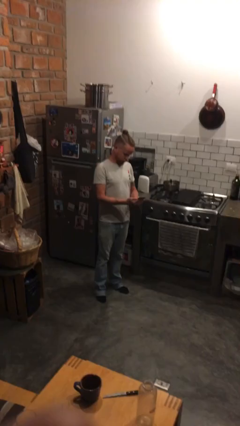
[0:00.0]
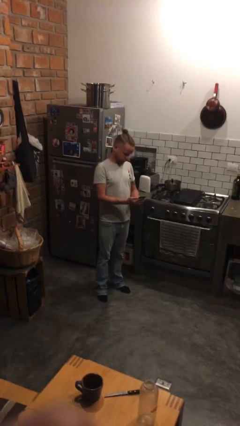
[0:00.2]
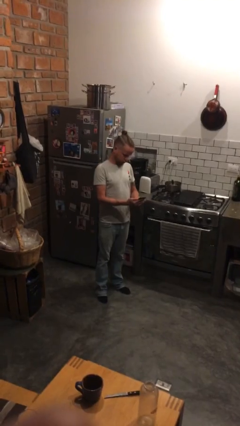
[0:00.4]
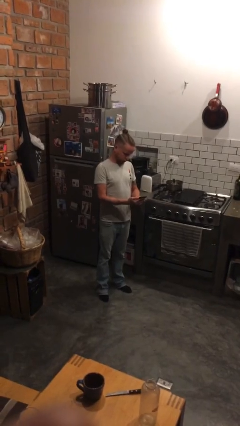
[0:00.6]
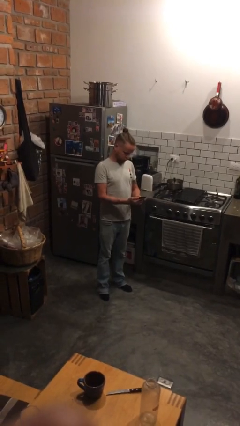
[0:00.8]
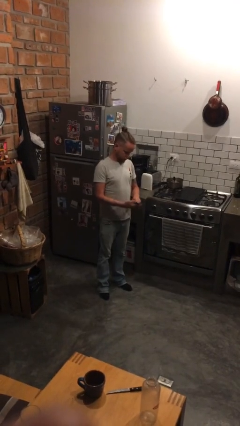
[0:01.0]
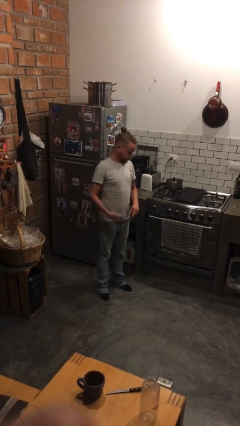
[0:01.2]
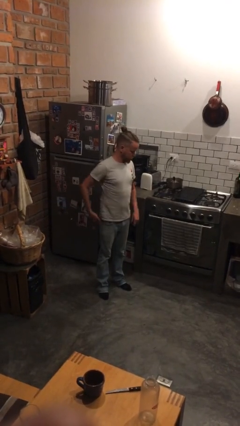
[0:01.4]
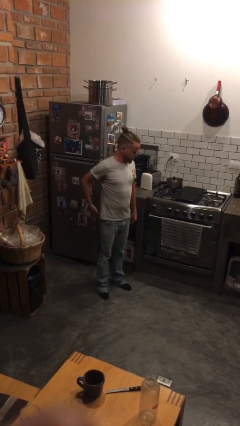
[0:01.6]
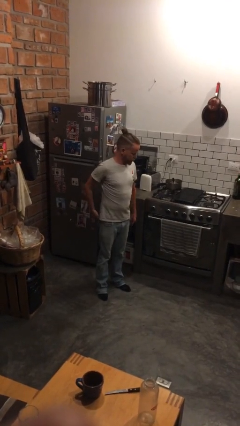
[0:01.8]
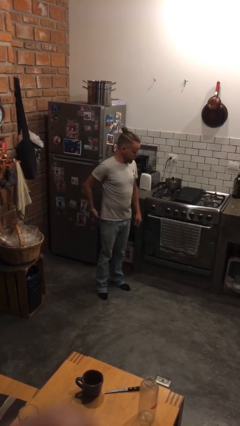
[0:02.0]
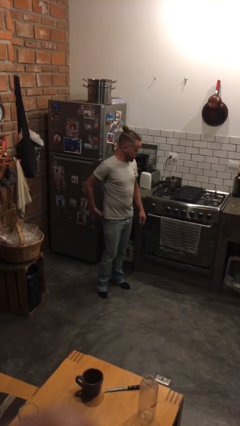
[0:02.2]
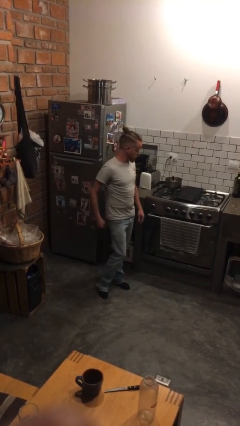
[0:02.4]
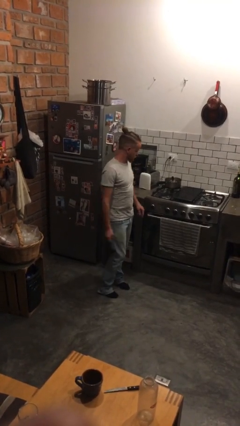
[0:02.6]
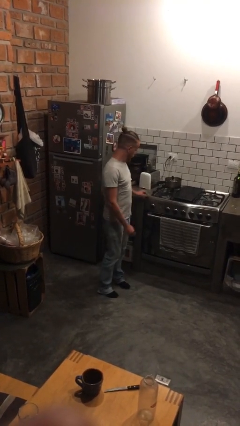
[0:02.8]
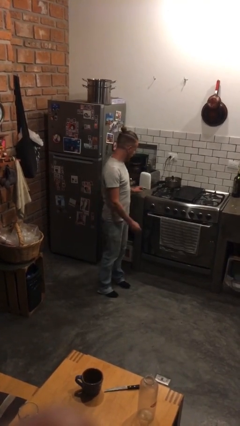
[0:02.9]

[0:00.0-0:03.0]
person puts phone into pocket

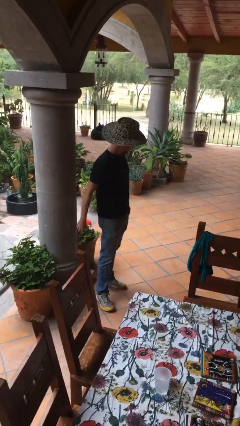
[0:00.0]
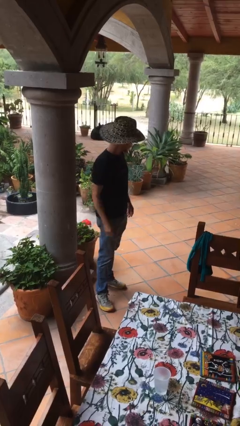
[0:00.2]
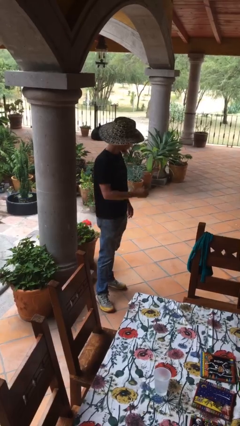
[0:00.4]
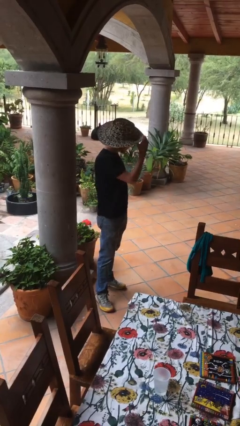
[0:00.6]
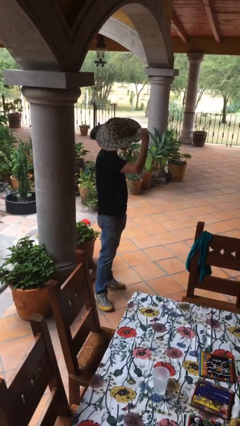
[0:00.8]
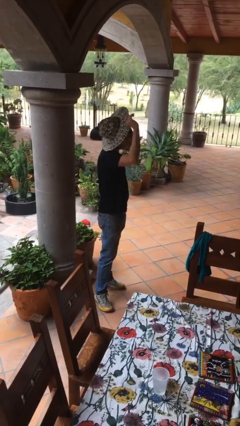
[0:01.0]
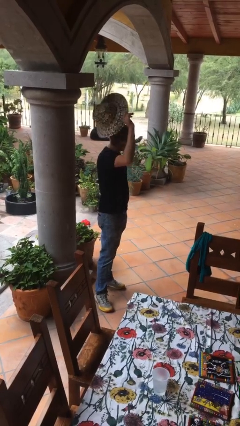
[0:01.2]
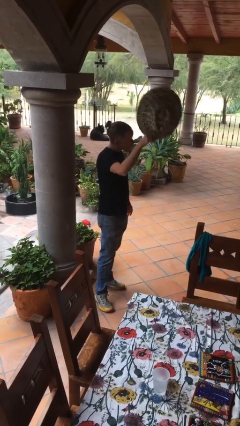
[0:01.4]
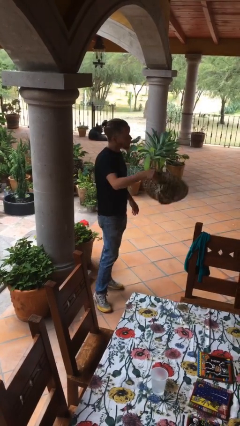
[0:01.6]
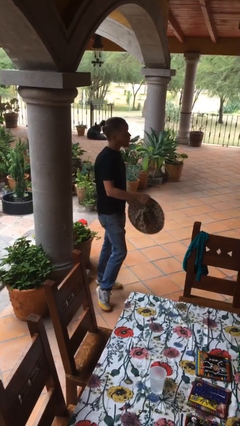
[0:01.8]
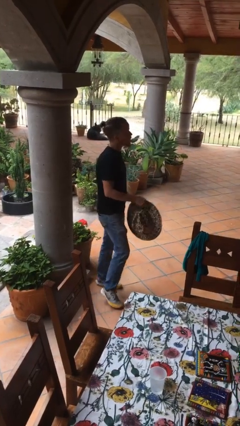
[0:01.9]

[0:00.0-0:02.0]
person takes off hat

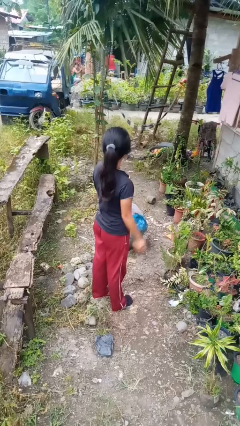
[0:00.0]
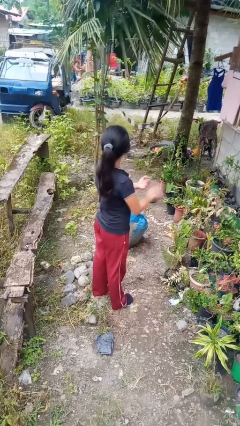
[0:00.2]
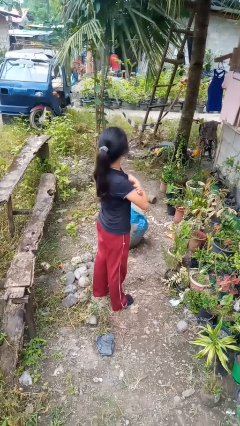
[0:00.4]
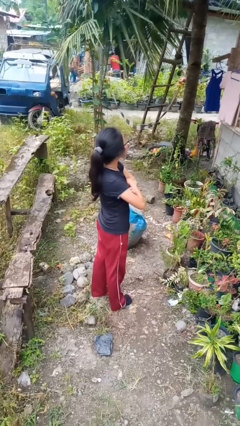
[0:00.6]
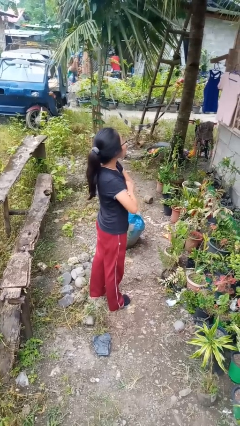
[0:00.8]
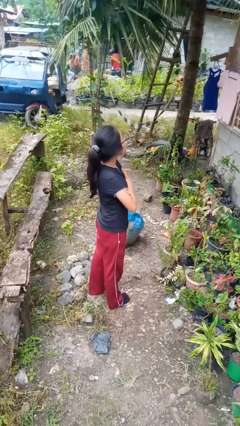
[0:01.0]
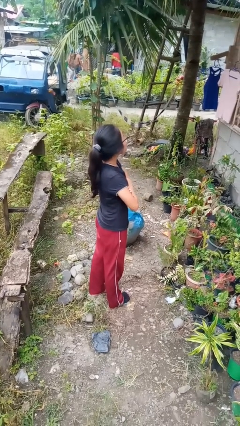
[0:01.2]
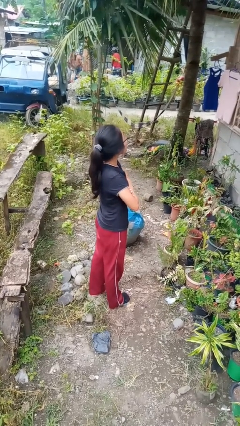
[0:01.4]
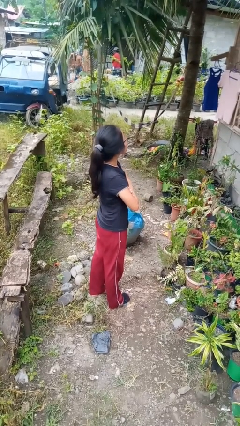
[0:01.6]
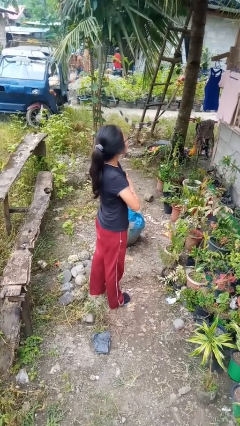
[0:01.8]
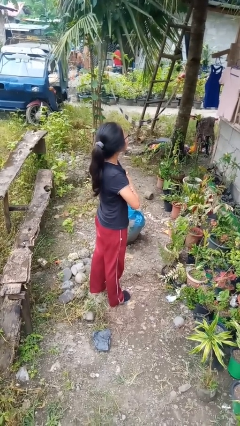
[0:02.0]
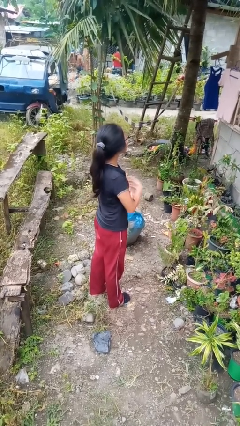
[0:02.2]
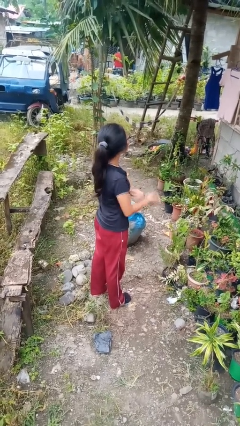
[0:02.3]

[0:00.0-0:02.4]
person crosses arms

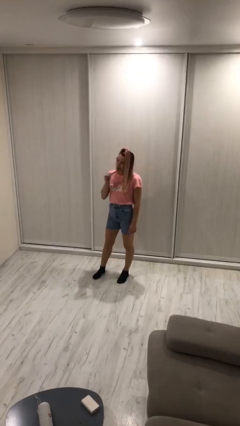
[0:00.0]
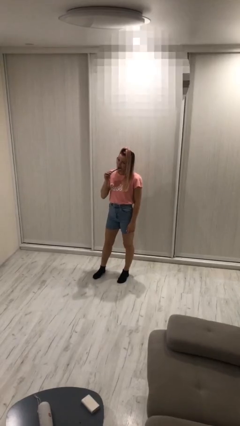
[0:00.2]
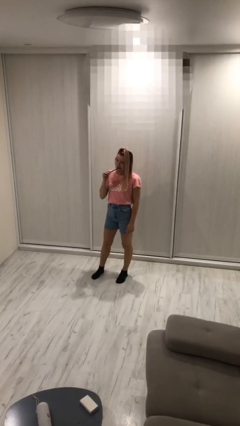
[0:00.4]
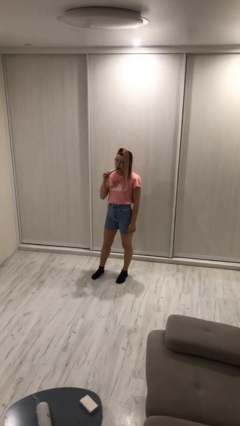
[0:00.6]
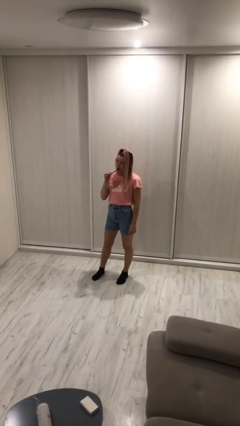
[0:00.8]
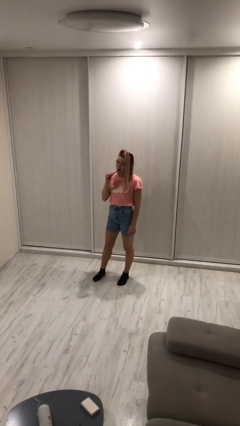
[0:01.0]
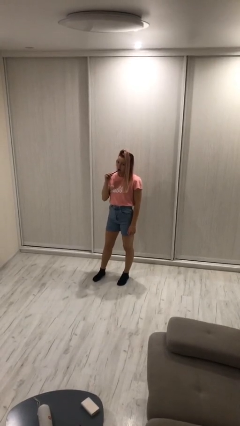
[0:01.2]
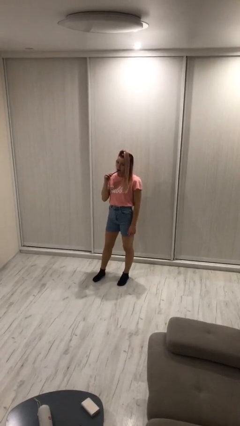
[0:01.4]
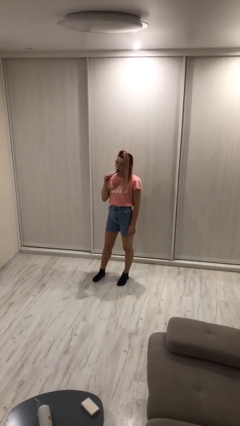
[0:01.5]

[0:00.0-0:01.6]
person brushes teeth

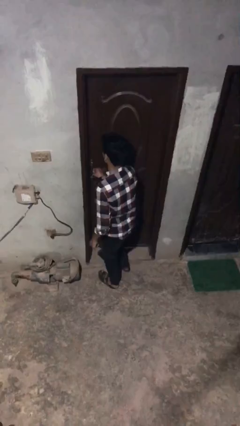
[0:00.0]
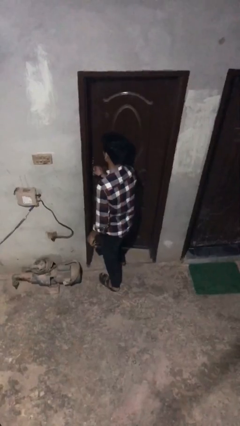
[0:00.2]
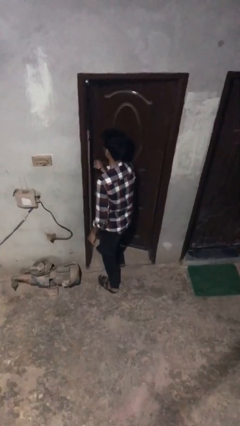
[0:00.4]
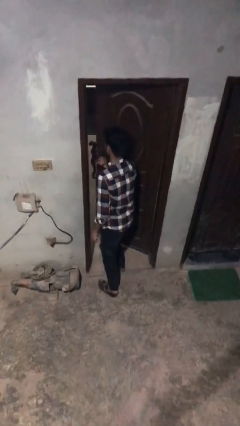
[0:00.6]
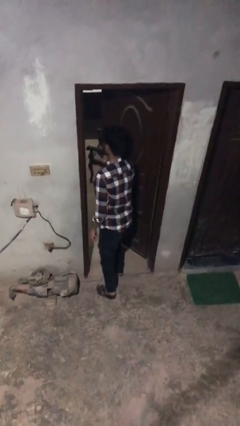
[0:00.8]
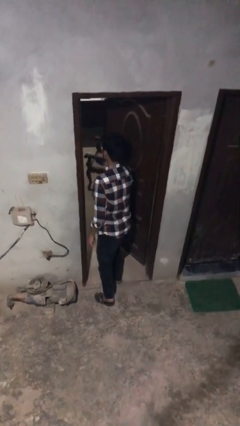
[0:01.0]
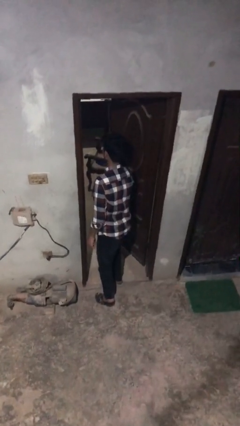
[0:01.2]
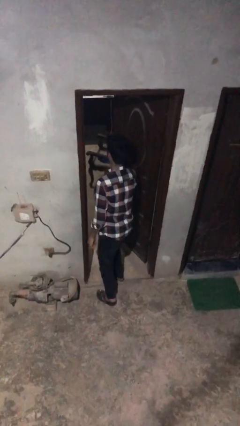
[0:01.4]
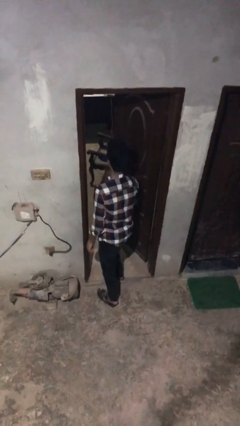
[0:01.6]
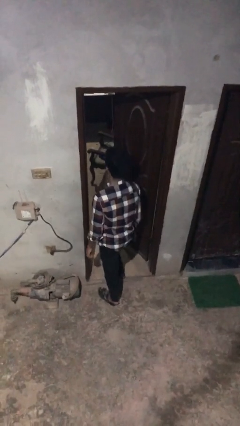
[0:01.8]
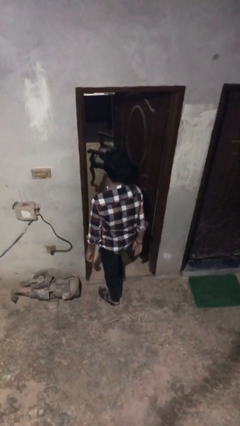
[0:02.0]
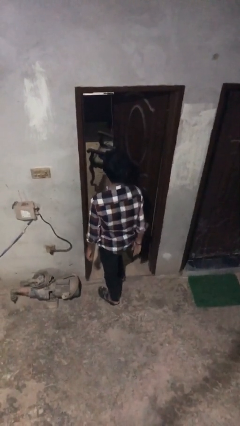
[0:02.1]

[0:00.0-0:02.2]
person opens facility door

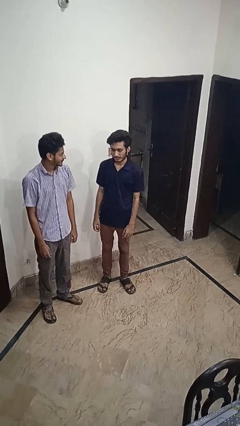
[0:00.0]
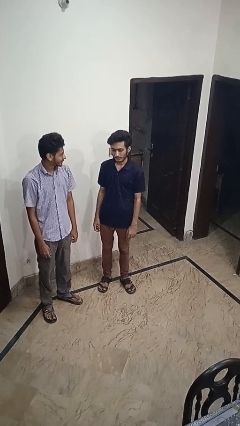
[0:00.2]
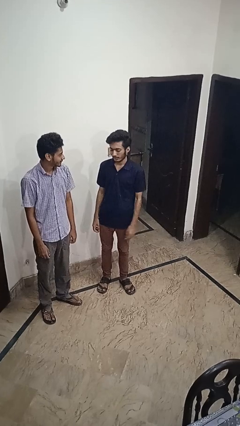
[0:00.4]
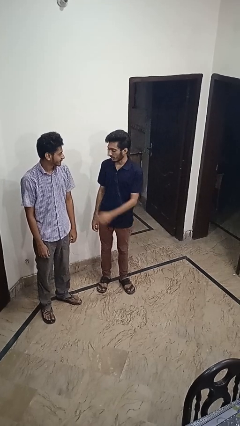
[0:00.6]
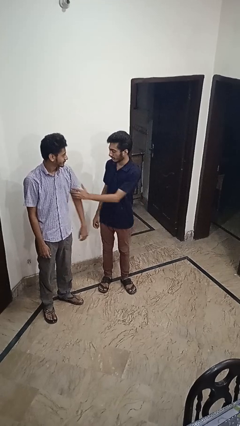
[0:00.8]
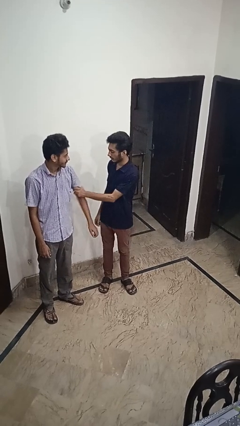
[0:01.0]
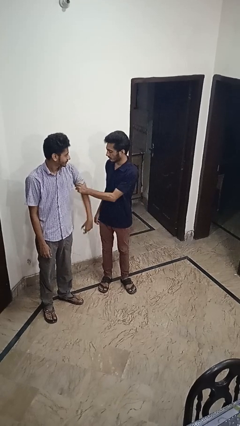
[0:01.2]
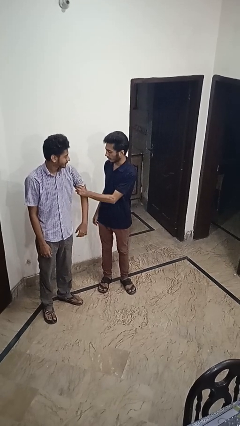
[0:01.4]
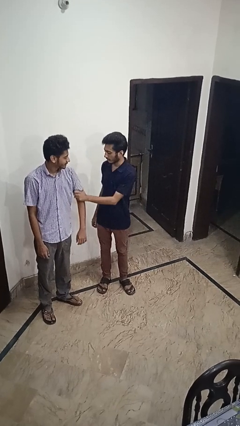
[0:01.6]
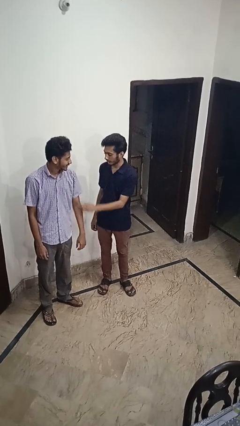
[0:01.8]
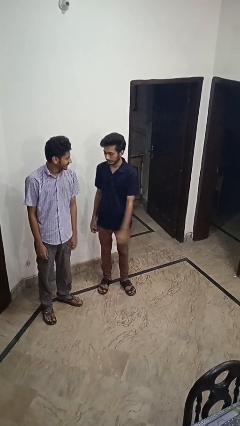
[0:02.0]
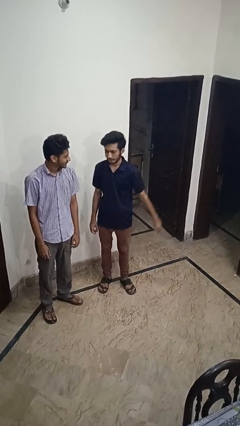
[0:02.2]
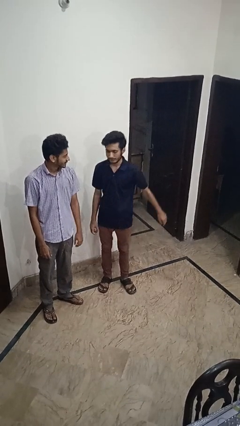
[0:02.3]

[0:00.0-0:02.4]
person grabs person by bicep

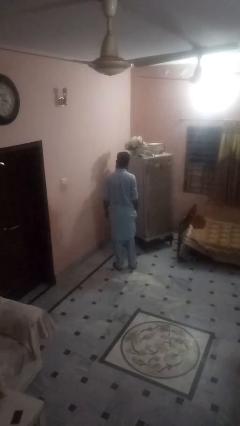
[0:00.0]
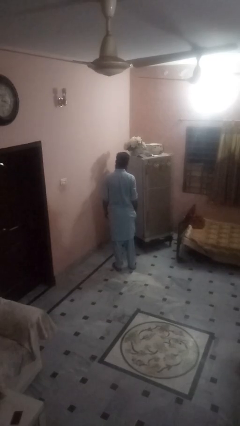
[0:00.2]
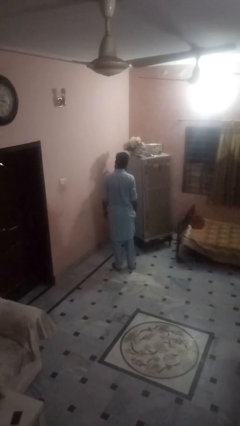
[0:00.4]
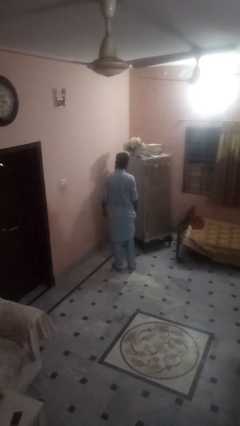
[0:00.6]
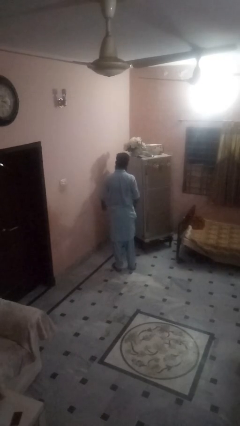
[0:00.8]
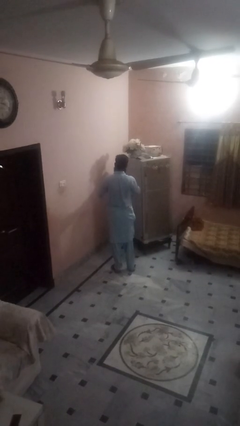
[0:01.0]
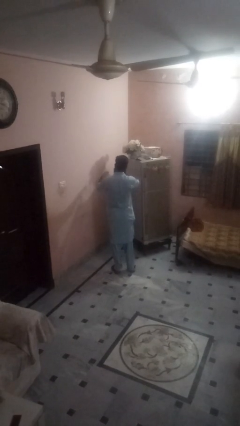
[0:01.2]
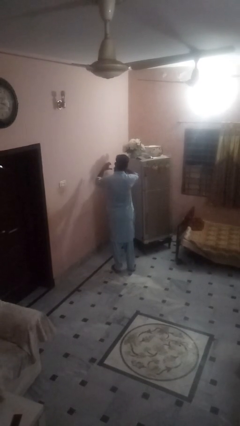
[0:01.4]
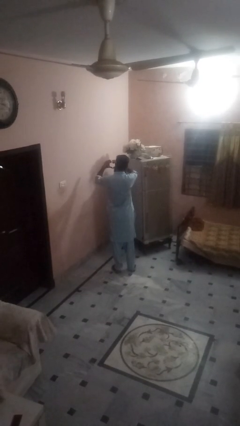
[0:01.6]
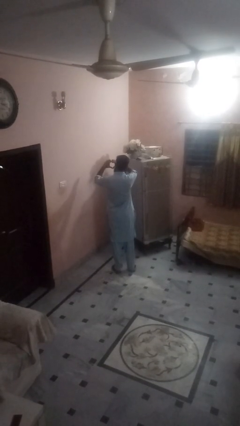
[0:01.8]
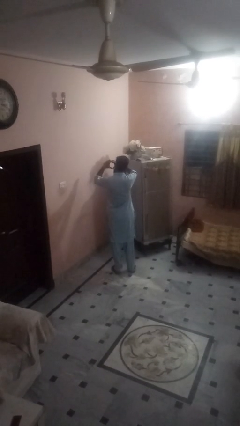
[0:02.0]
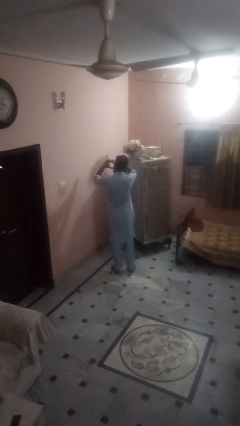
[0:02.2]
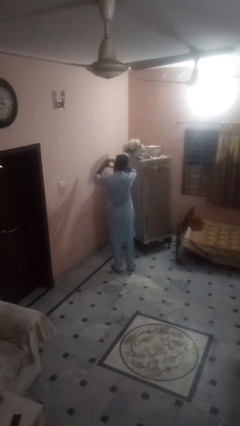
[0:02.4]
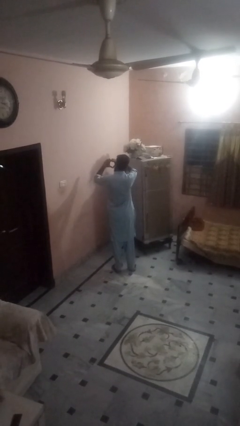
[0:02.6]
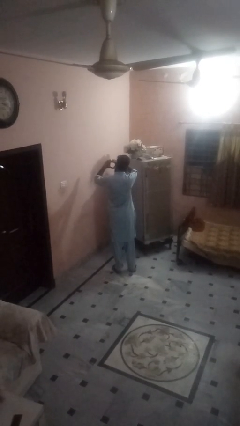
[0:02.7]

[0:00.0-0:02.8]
person gestures heart

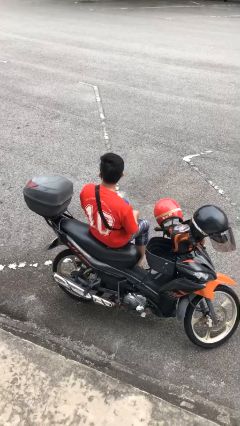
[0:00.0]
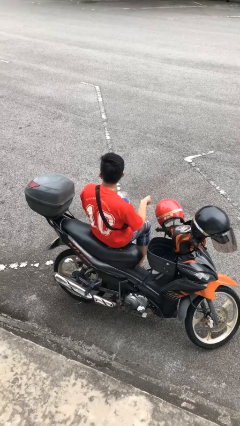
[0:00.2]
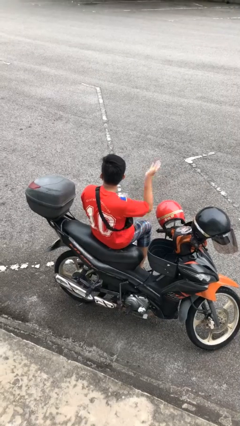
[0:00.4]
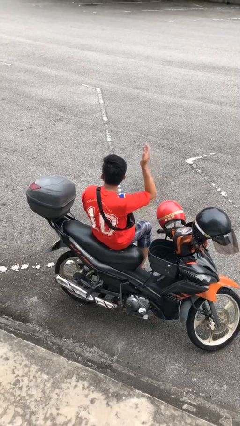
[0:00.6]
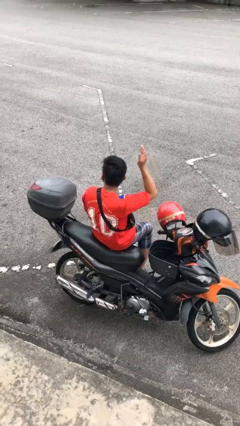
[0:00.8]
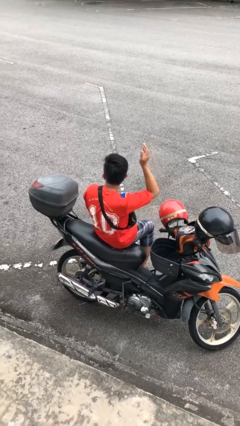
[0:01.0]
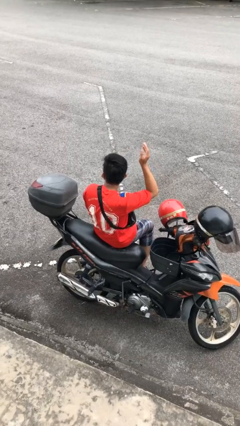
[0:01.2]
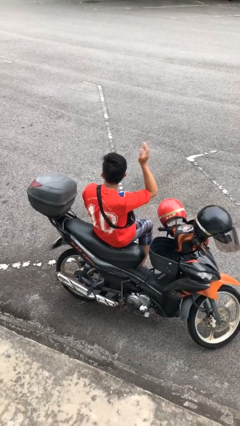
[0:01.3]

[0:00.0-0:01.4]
person gestures swipe up
